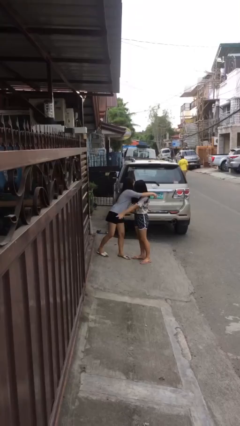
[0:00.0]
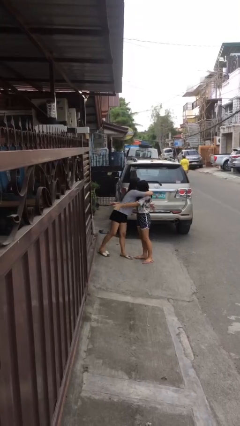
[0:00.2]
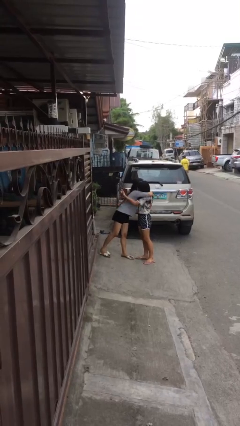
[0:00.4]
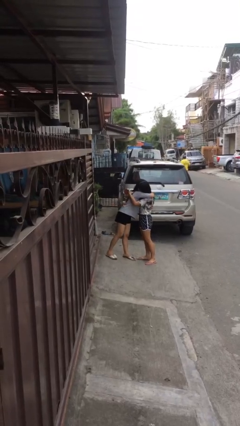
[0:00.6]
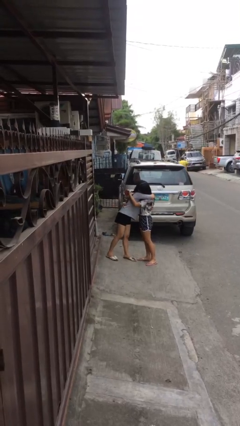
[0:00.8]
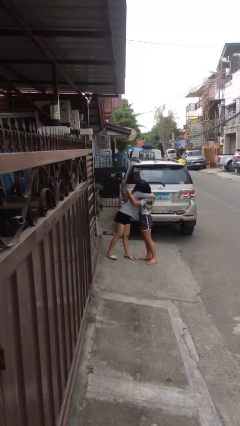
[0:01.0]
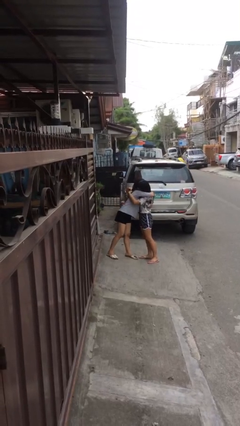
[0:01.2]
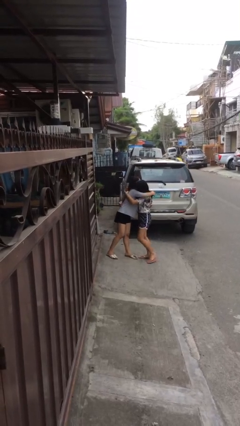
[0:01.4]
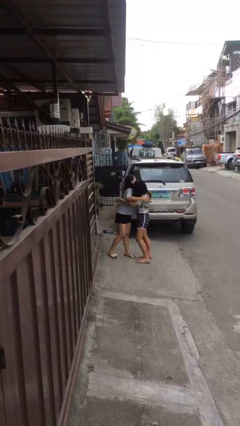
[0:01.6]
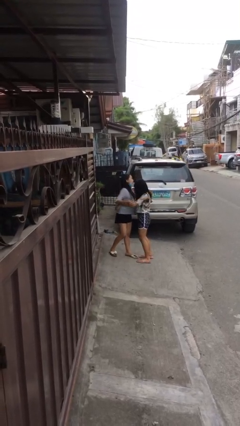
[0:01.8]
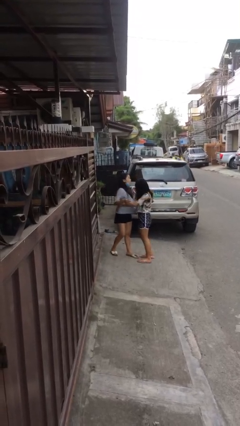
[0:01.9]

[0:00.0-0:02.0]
person embraces person

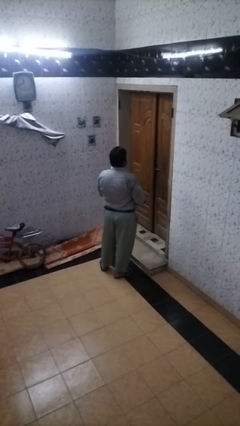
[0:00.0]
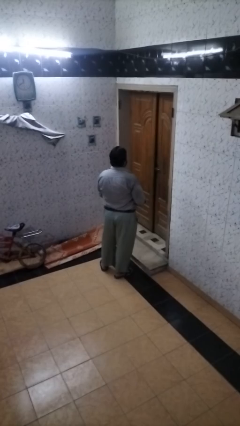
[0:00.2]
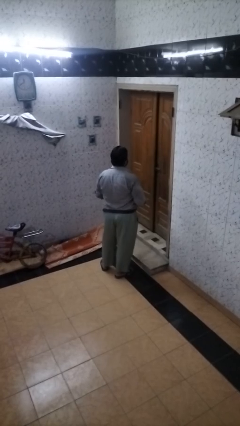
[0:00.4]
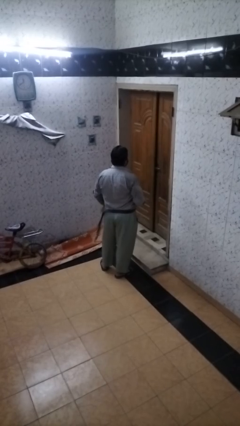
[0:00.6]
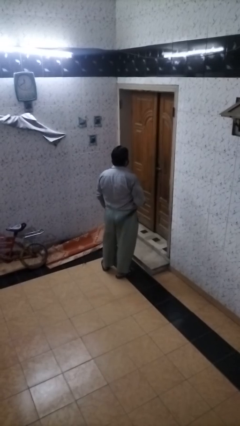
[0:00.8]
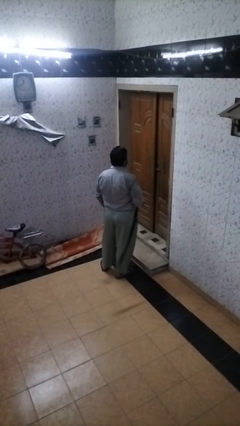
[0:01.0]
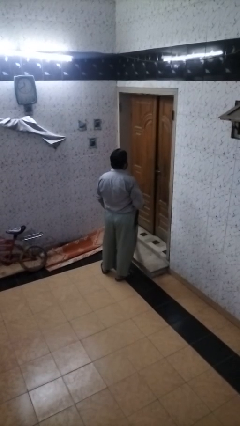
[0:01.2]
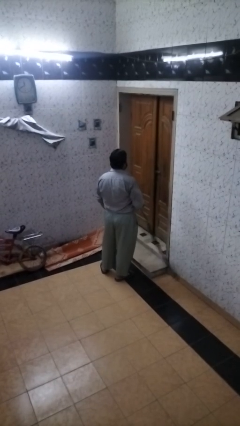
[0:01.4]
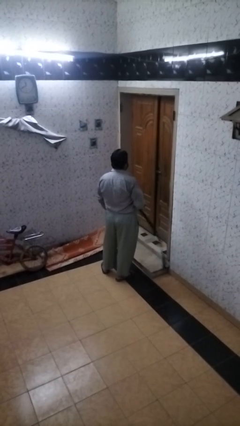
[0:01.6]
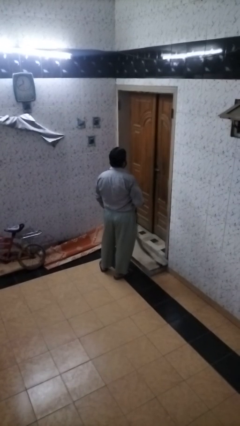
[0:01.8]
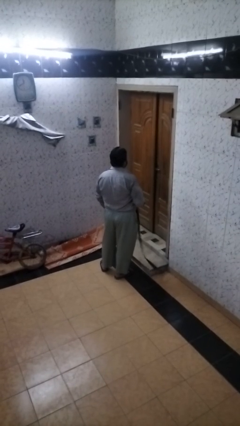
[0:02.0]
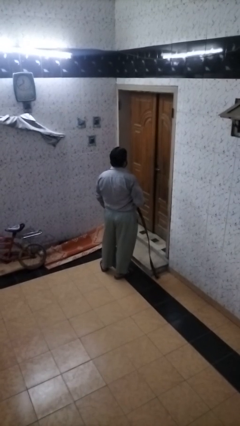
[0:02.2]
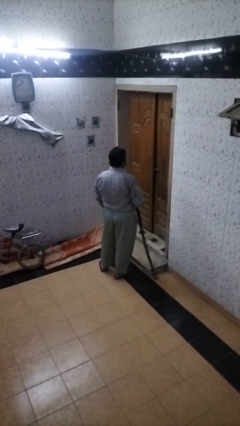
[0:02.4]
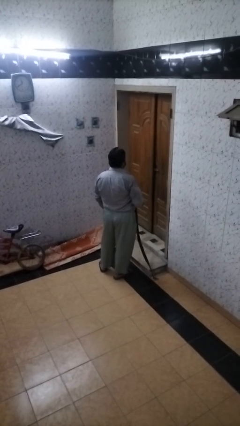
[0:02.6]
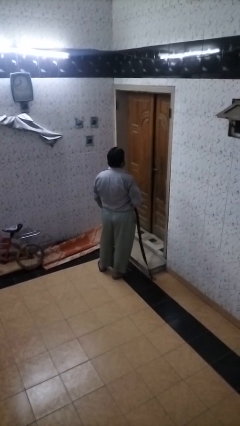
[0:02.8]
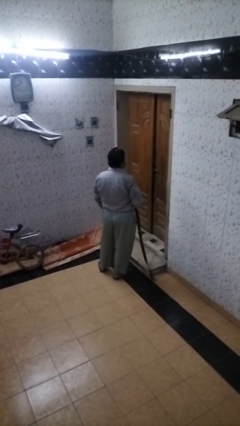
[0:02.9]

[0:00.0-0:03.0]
person takes off belt

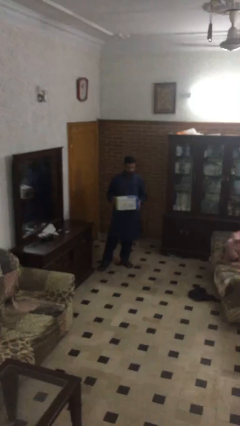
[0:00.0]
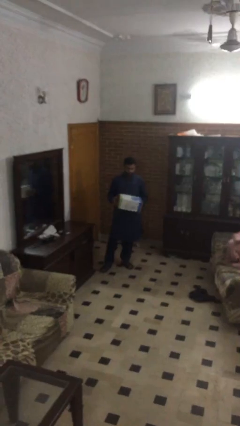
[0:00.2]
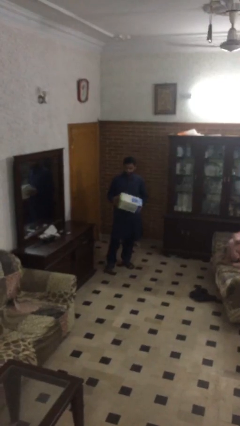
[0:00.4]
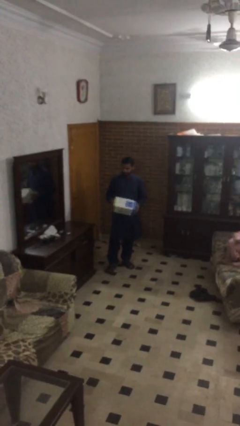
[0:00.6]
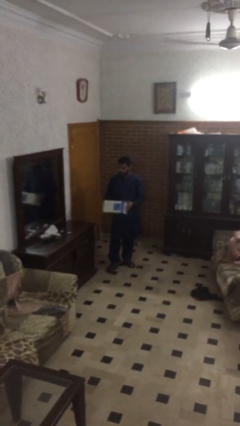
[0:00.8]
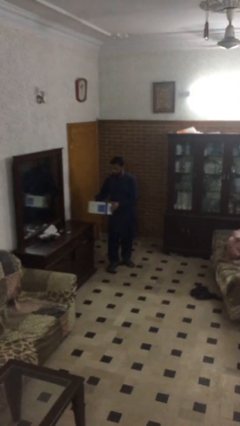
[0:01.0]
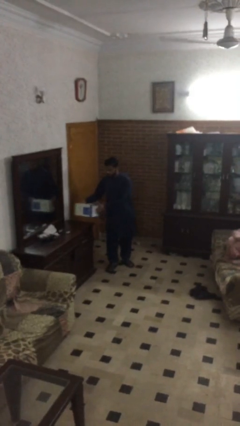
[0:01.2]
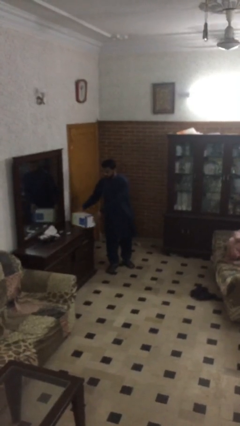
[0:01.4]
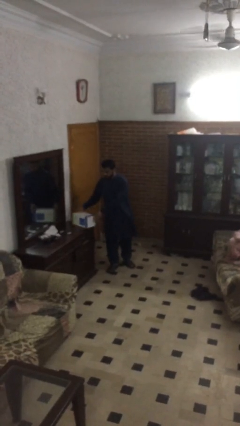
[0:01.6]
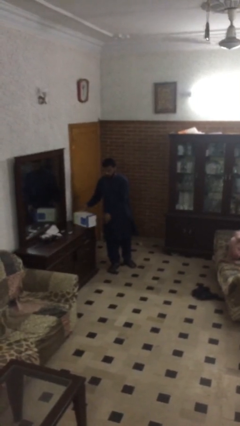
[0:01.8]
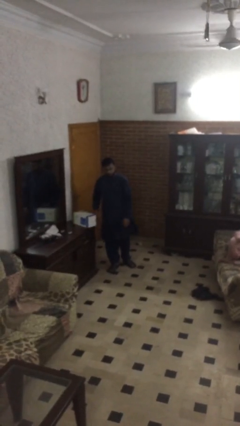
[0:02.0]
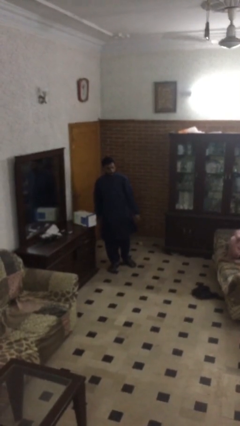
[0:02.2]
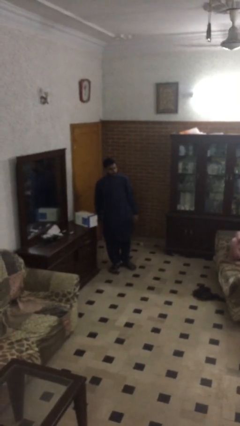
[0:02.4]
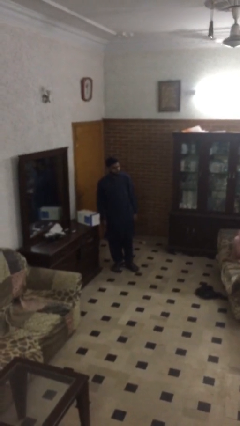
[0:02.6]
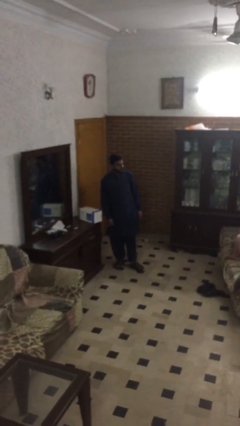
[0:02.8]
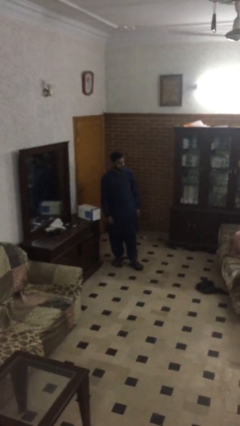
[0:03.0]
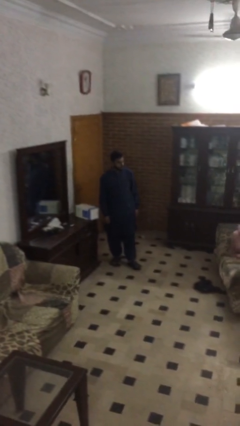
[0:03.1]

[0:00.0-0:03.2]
person puts down object on table

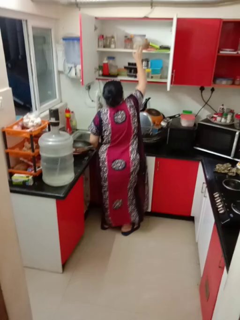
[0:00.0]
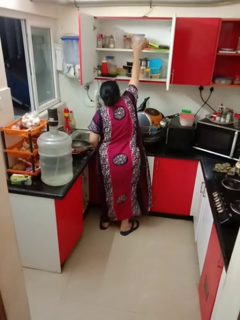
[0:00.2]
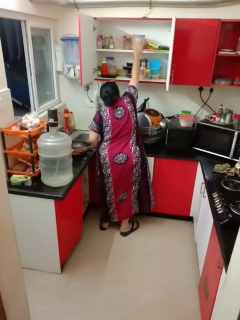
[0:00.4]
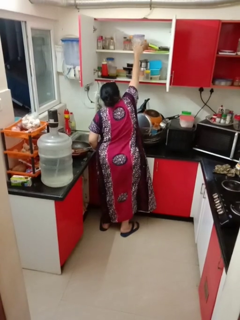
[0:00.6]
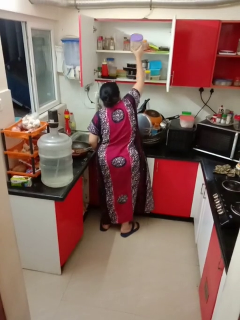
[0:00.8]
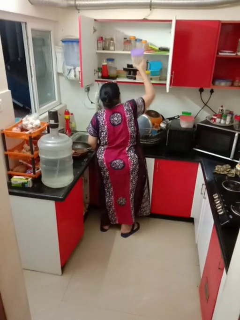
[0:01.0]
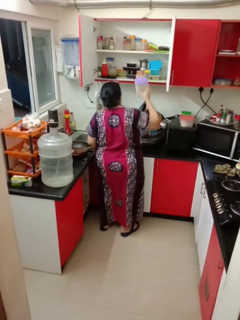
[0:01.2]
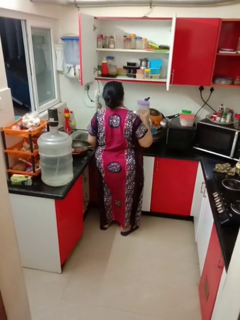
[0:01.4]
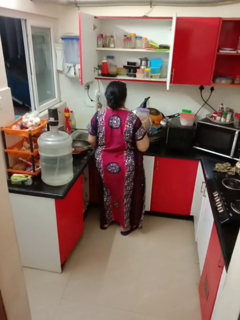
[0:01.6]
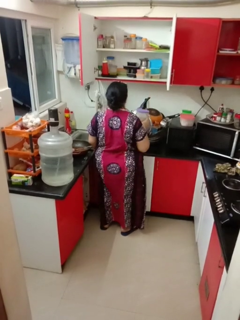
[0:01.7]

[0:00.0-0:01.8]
person takes object from cabinet

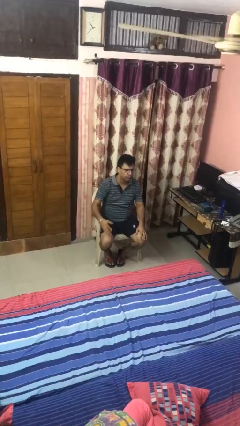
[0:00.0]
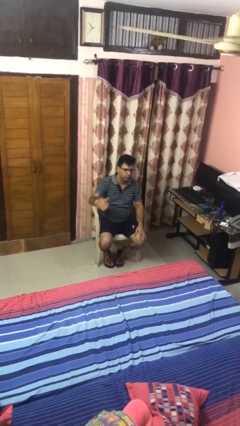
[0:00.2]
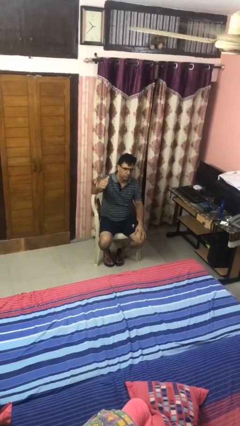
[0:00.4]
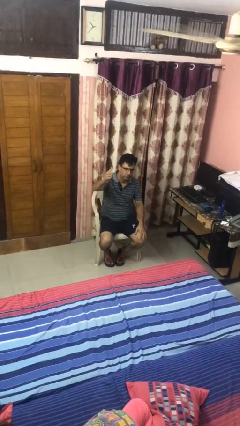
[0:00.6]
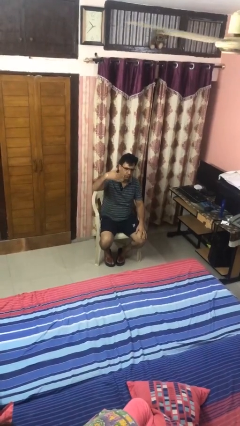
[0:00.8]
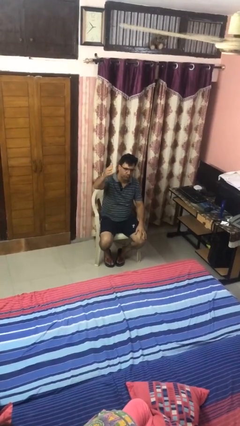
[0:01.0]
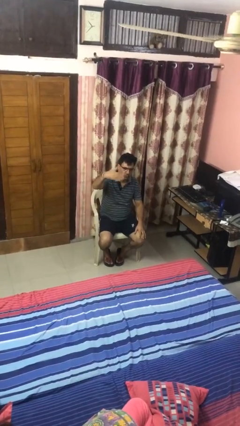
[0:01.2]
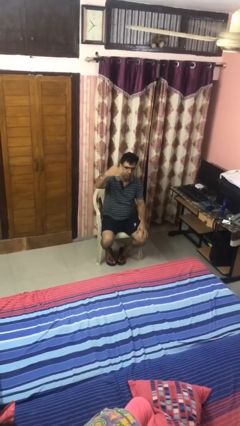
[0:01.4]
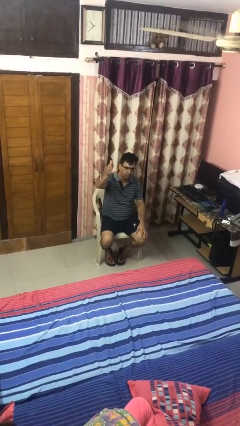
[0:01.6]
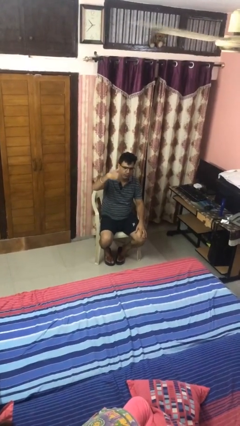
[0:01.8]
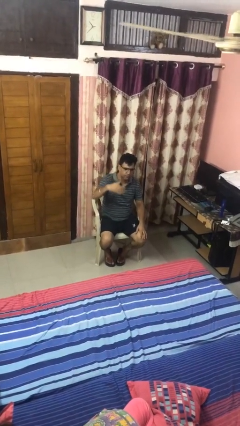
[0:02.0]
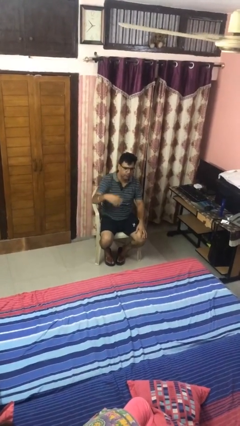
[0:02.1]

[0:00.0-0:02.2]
person gestures come here

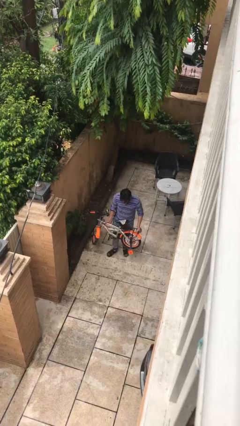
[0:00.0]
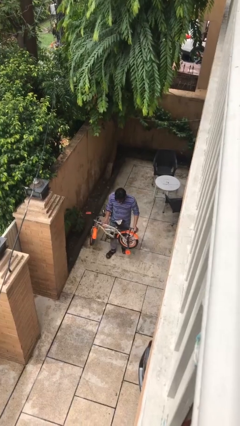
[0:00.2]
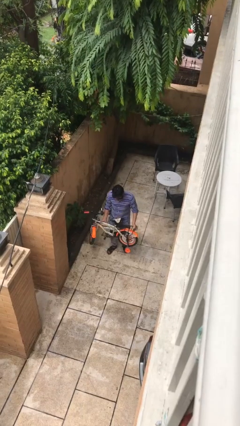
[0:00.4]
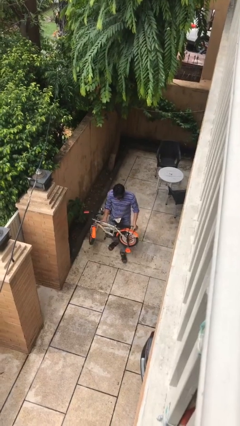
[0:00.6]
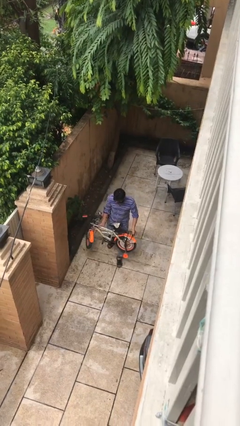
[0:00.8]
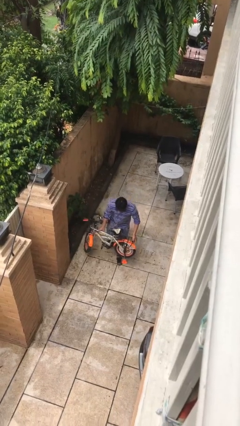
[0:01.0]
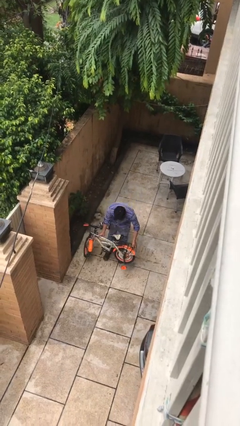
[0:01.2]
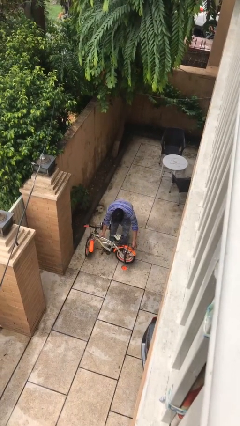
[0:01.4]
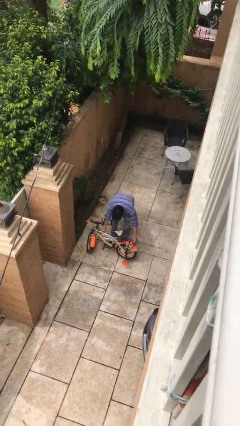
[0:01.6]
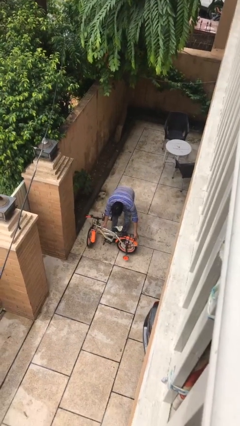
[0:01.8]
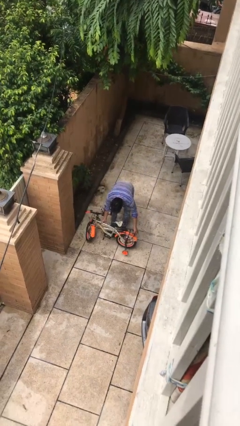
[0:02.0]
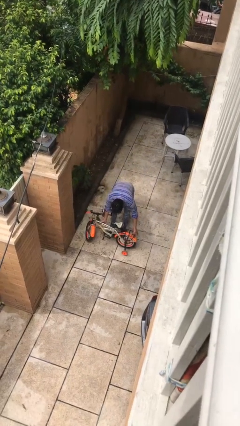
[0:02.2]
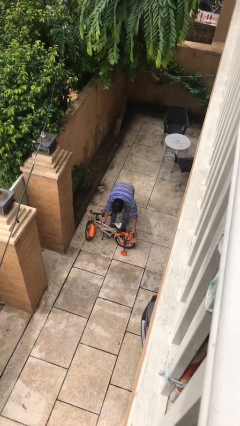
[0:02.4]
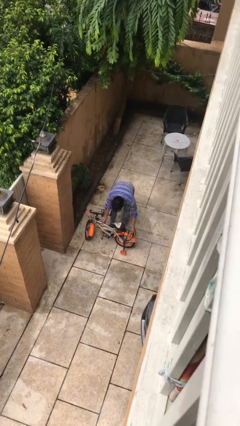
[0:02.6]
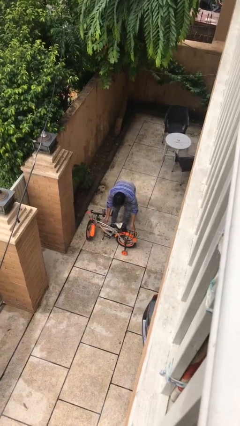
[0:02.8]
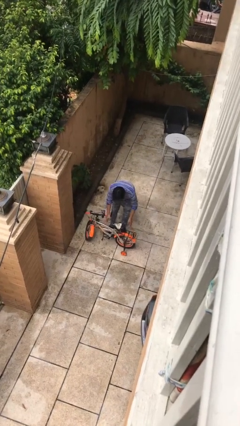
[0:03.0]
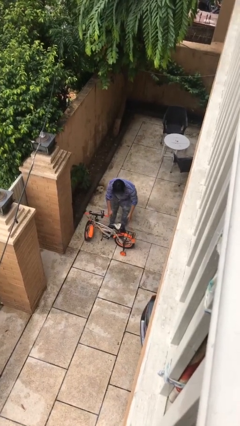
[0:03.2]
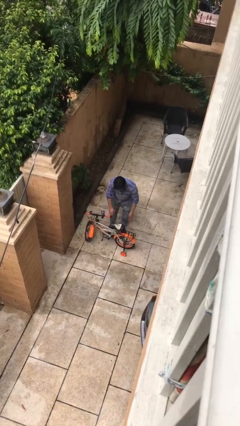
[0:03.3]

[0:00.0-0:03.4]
person puts down object on floor

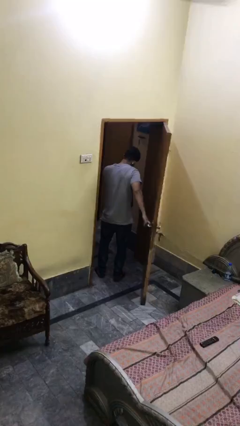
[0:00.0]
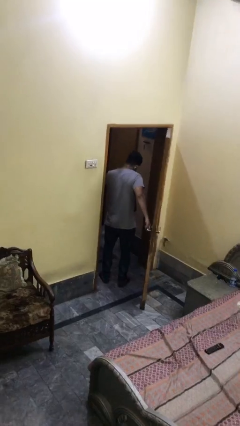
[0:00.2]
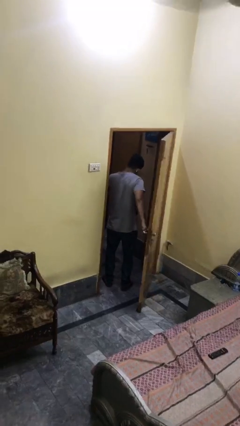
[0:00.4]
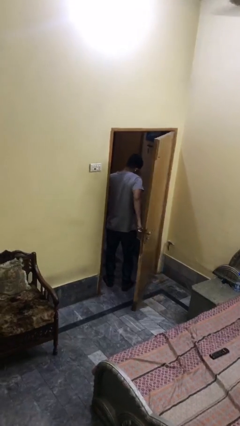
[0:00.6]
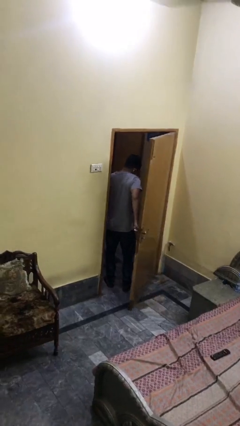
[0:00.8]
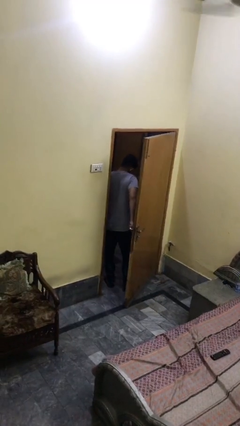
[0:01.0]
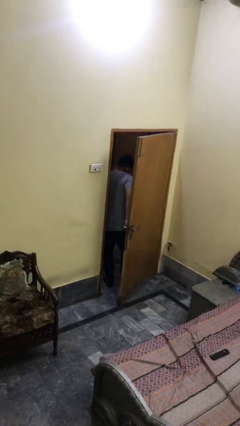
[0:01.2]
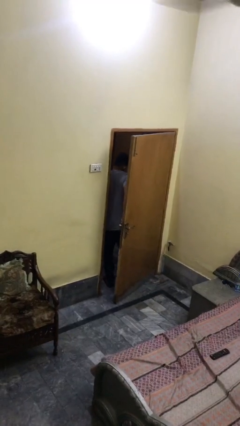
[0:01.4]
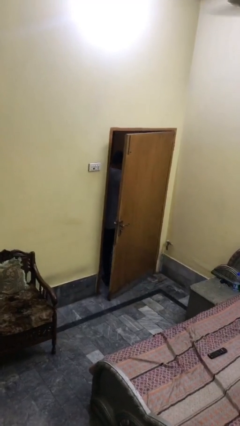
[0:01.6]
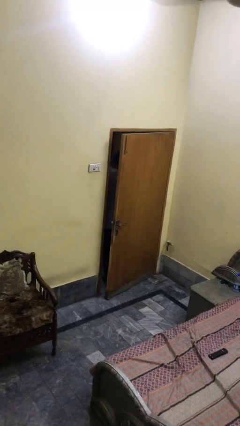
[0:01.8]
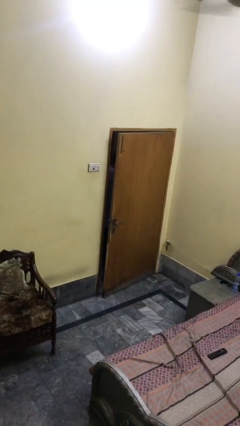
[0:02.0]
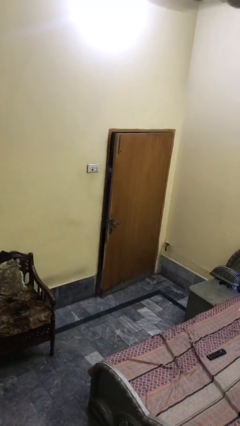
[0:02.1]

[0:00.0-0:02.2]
person closes facility door
